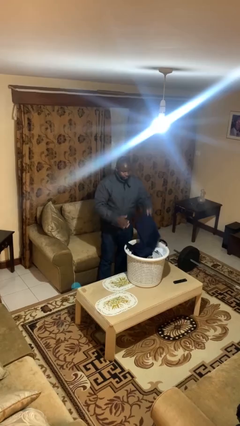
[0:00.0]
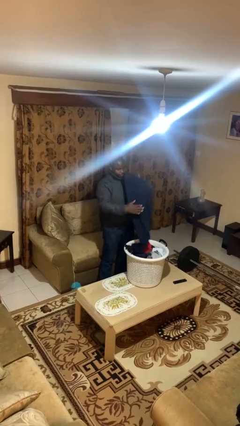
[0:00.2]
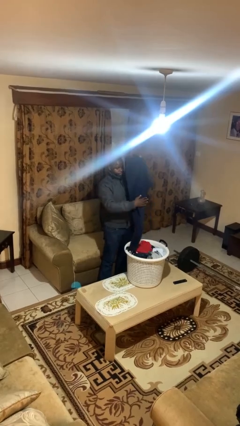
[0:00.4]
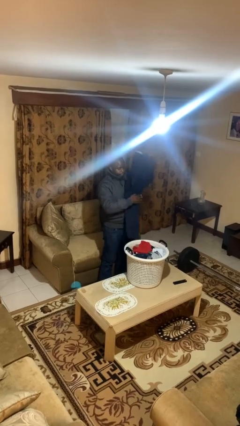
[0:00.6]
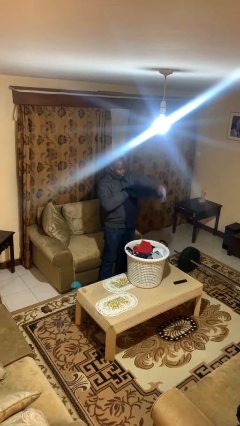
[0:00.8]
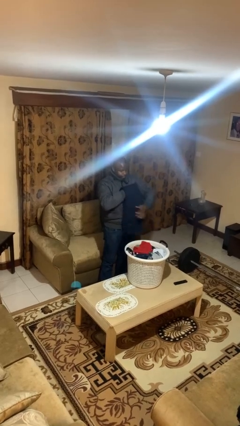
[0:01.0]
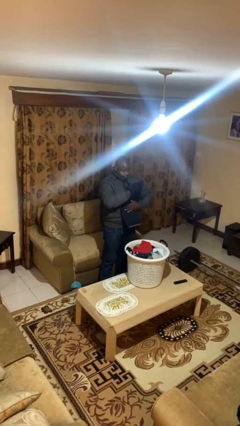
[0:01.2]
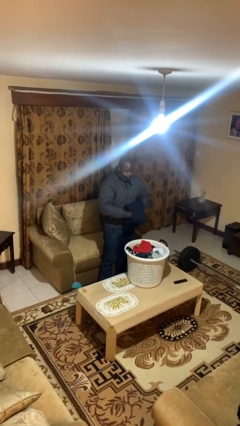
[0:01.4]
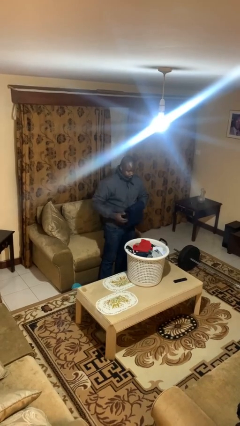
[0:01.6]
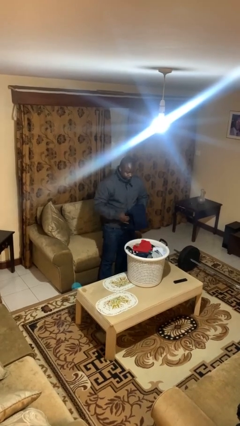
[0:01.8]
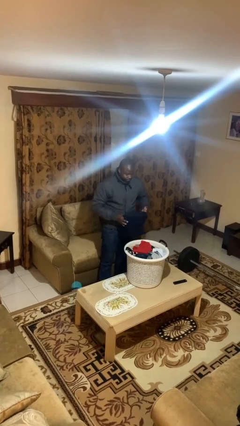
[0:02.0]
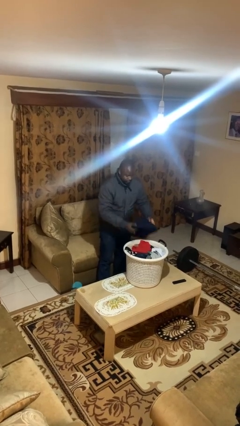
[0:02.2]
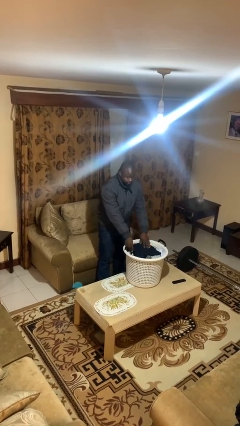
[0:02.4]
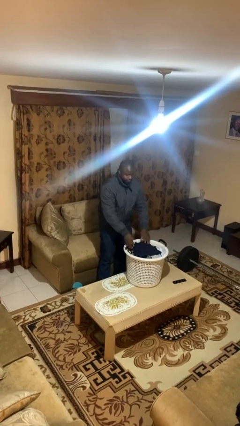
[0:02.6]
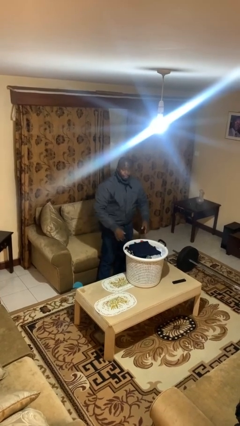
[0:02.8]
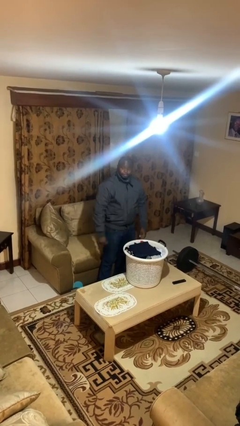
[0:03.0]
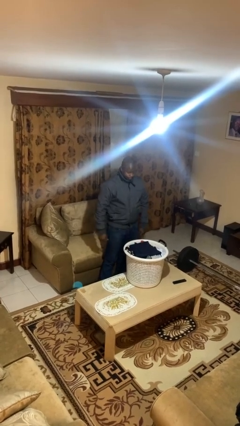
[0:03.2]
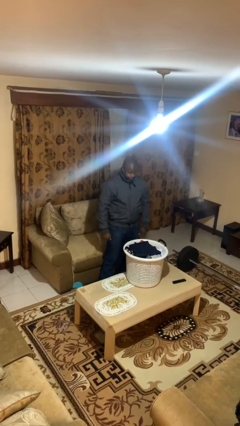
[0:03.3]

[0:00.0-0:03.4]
person folds pants

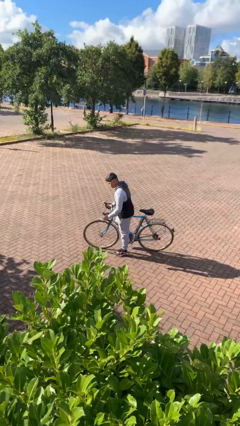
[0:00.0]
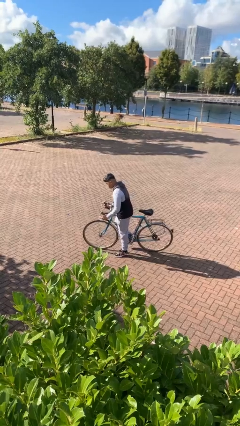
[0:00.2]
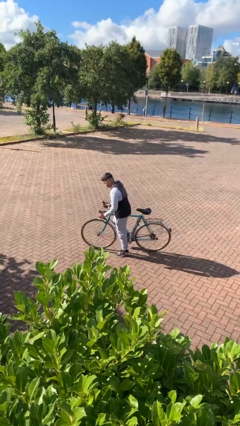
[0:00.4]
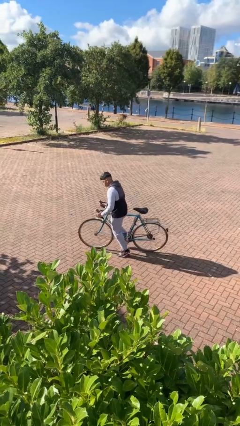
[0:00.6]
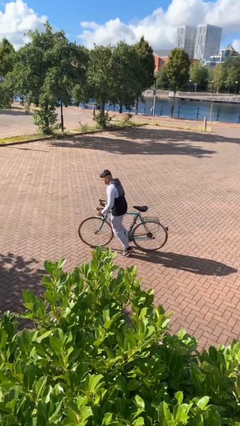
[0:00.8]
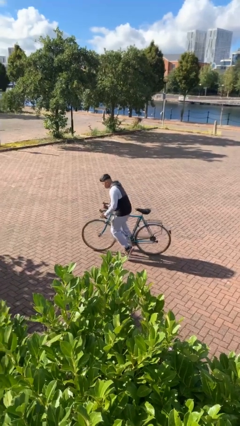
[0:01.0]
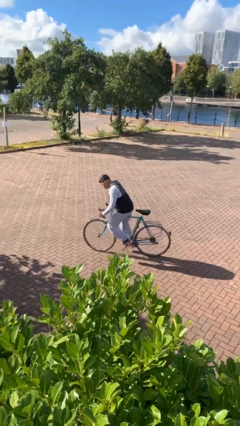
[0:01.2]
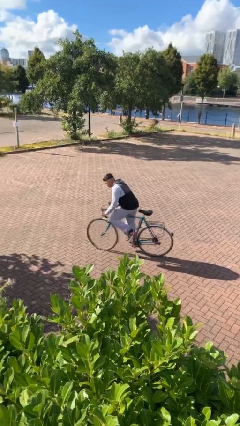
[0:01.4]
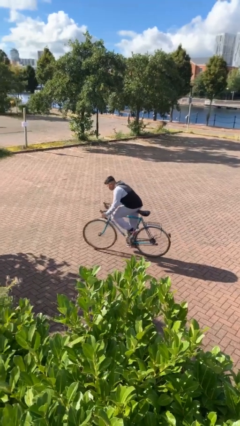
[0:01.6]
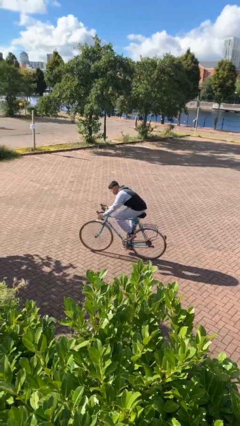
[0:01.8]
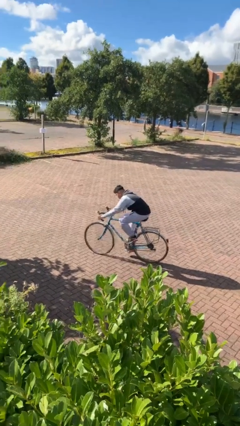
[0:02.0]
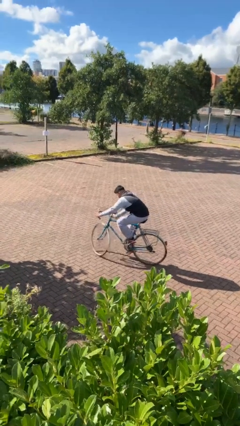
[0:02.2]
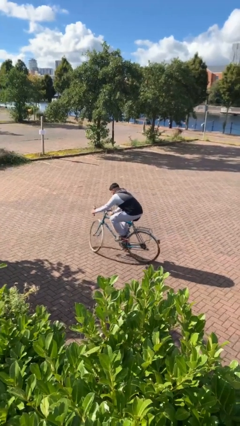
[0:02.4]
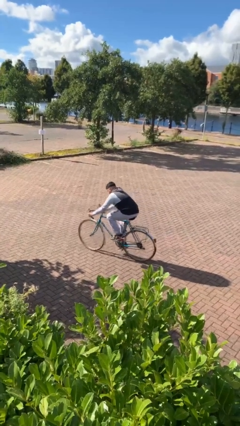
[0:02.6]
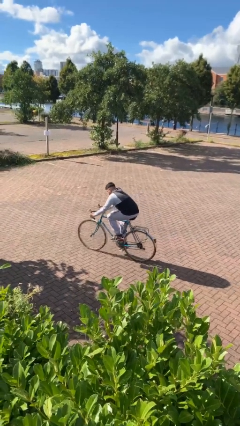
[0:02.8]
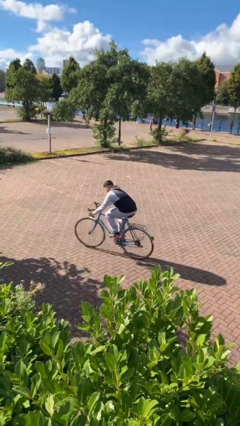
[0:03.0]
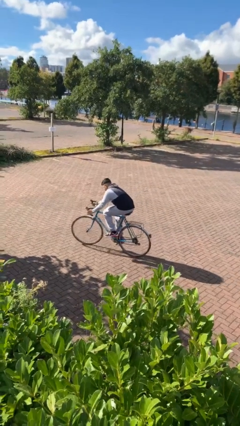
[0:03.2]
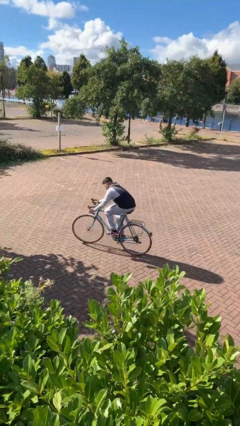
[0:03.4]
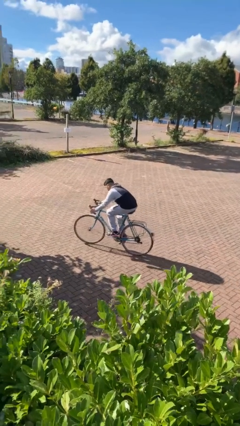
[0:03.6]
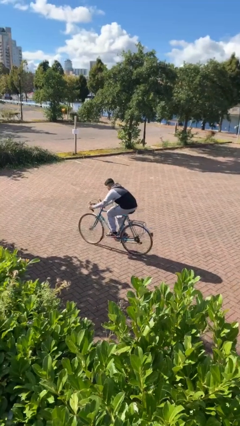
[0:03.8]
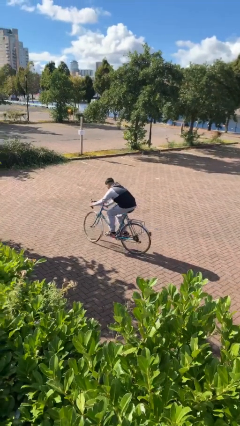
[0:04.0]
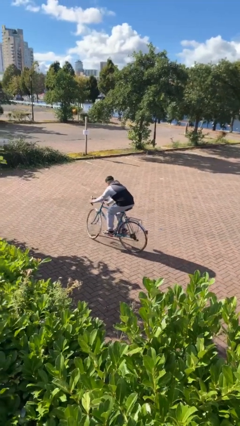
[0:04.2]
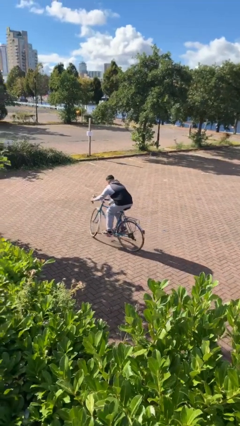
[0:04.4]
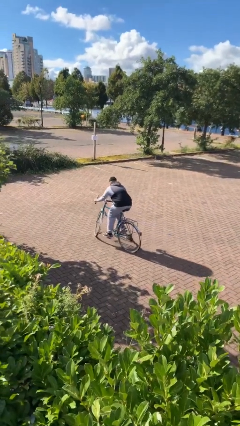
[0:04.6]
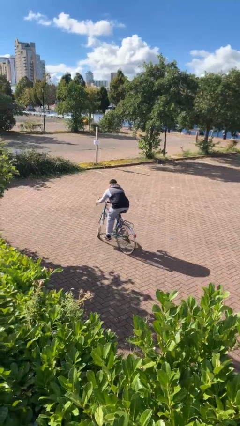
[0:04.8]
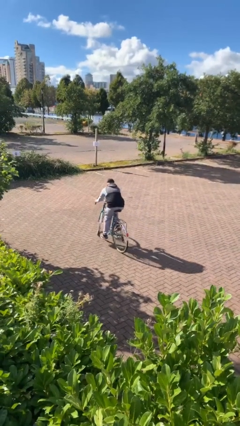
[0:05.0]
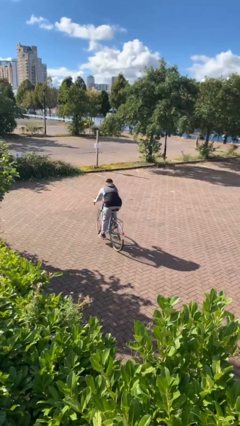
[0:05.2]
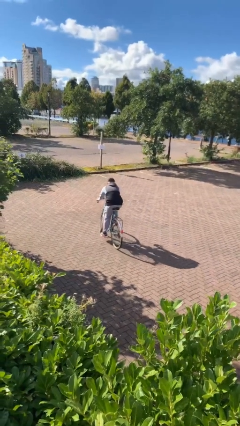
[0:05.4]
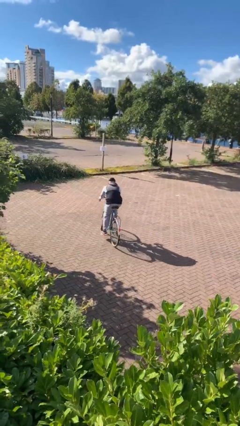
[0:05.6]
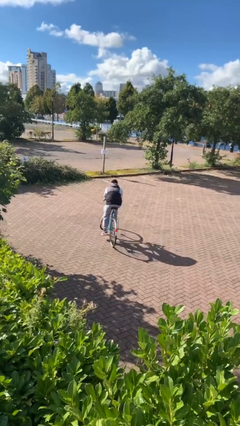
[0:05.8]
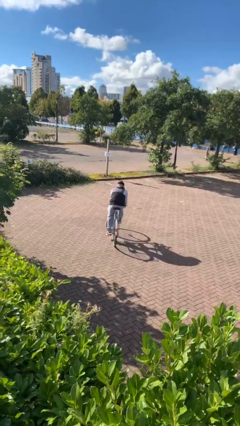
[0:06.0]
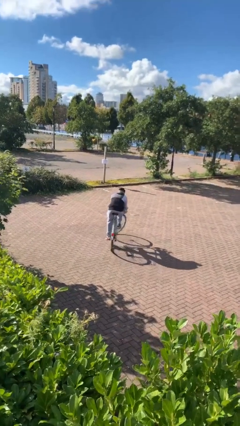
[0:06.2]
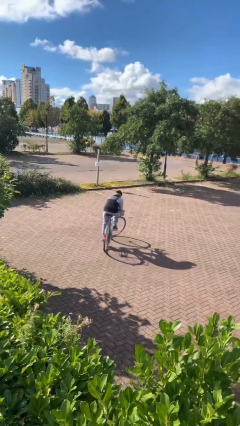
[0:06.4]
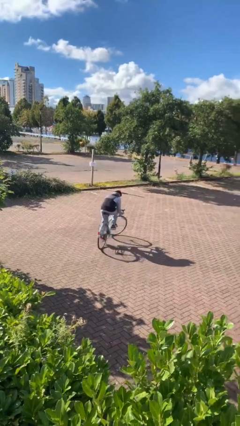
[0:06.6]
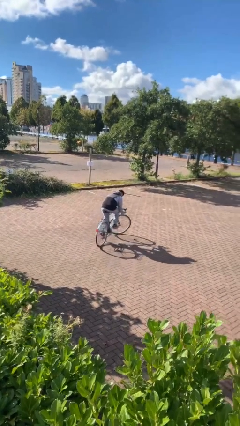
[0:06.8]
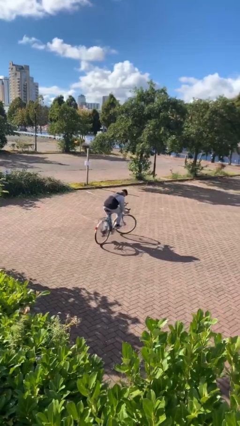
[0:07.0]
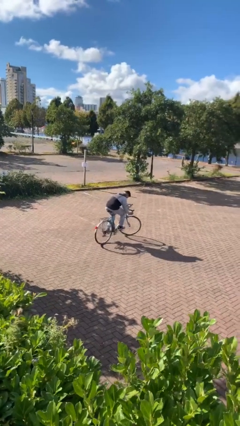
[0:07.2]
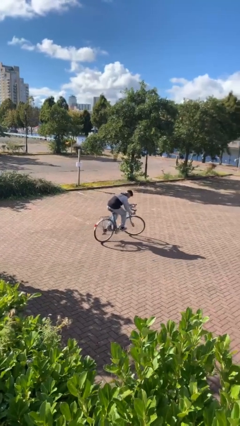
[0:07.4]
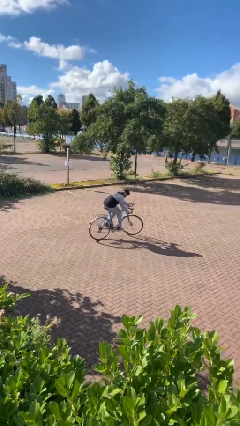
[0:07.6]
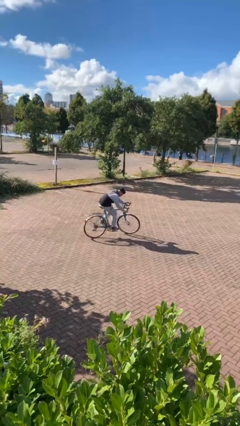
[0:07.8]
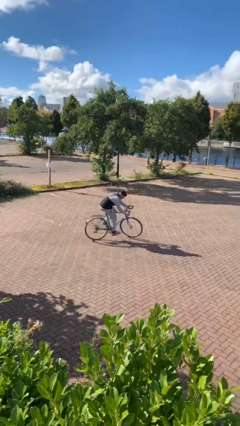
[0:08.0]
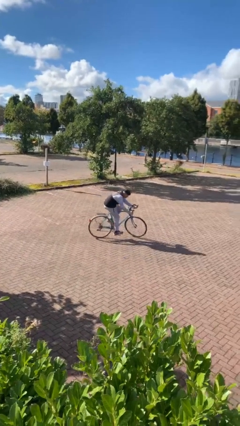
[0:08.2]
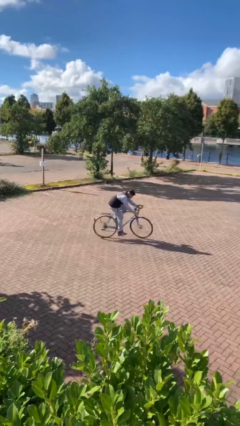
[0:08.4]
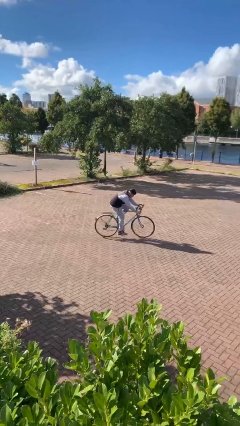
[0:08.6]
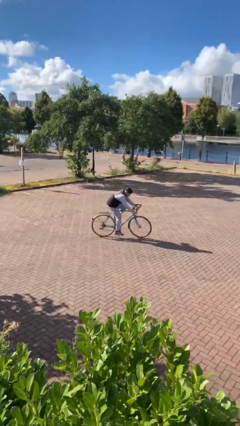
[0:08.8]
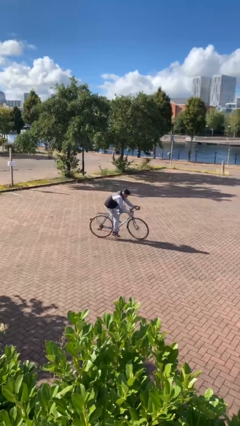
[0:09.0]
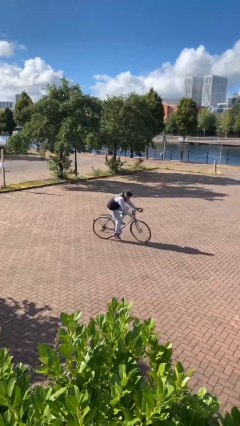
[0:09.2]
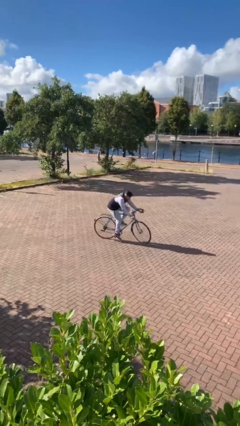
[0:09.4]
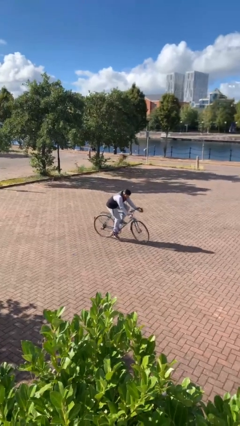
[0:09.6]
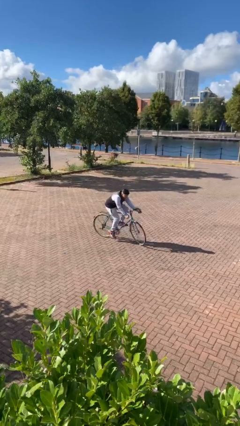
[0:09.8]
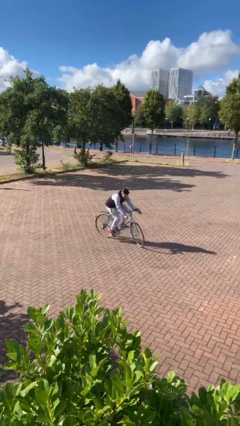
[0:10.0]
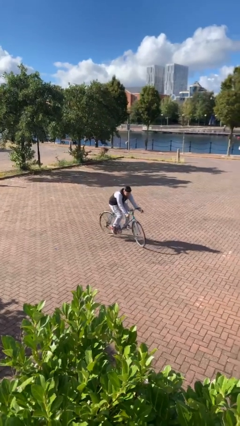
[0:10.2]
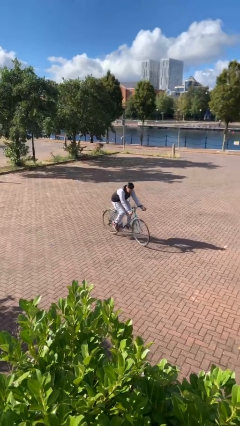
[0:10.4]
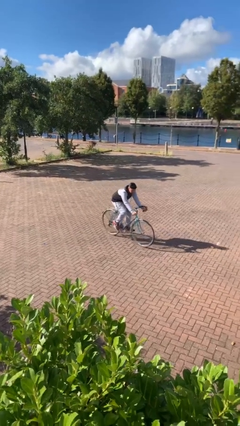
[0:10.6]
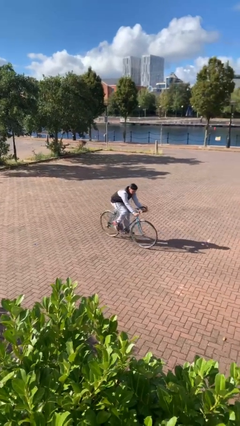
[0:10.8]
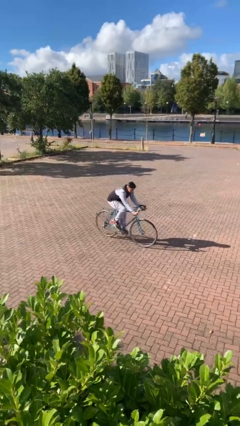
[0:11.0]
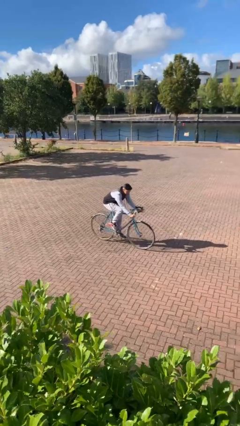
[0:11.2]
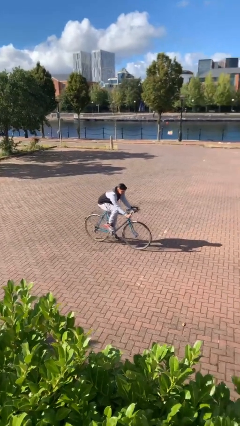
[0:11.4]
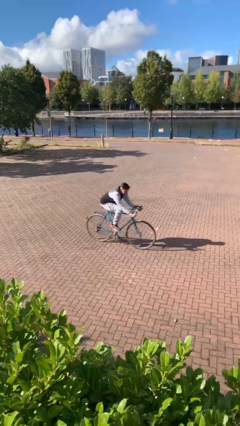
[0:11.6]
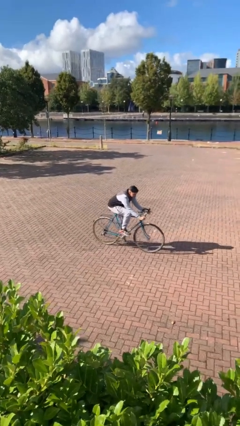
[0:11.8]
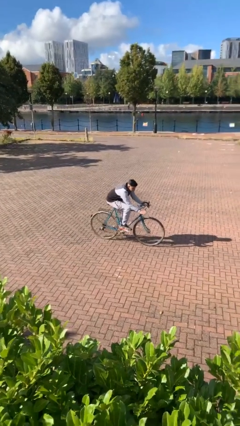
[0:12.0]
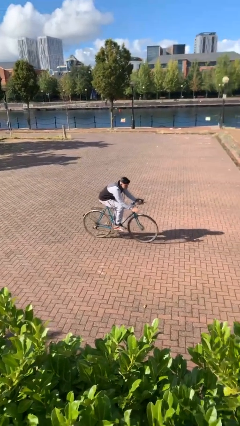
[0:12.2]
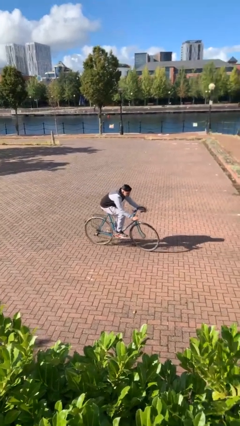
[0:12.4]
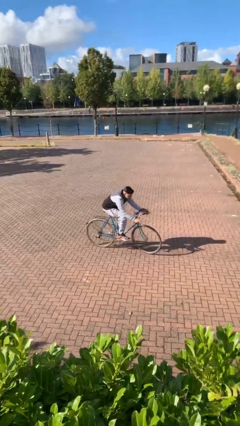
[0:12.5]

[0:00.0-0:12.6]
person rides bicycle

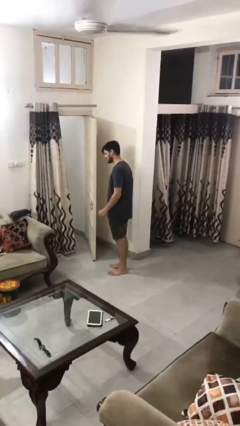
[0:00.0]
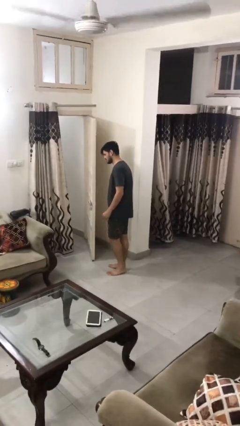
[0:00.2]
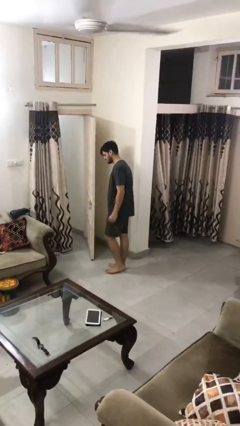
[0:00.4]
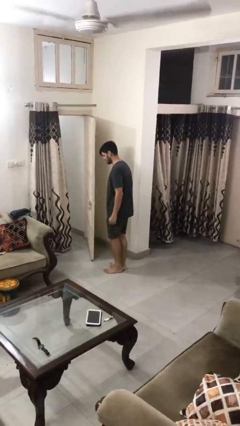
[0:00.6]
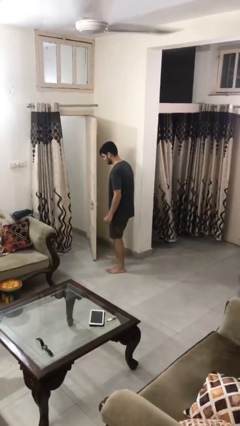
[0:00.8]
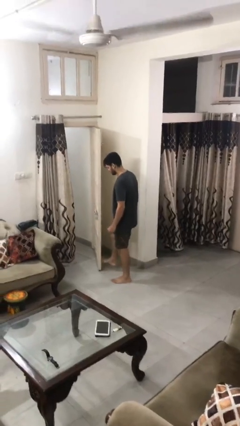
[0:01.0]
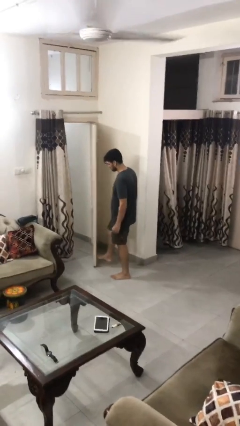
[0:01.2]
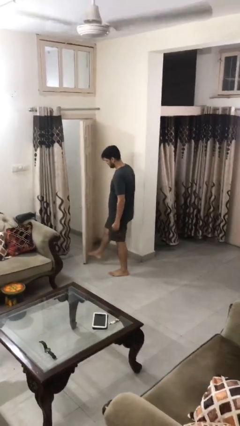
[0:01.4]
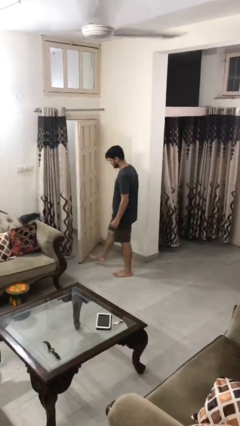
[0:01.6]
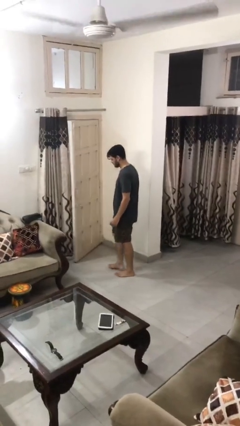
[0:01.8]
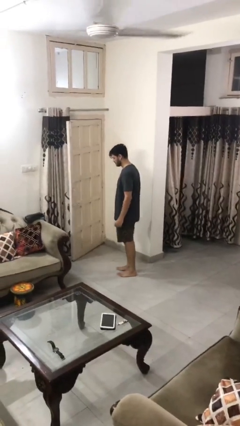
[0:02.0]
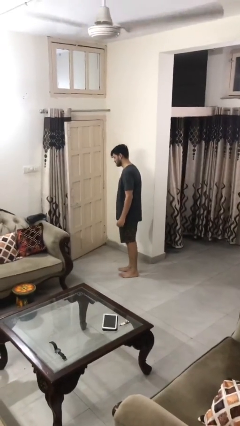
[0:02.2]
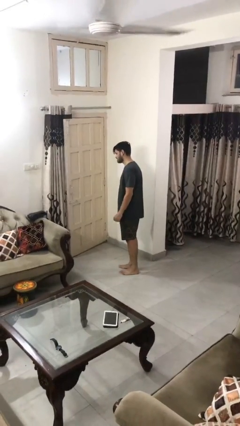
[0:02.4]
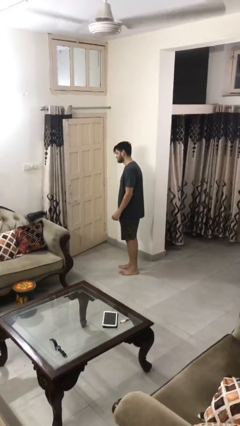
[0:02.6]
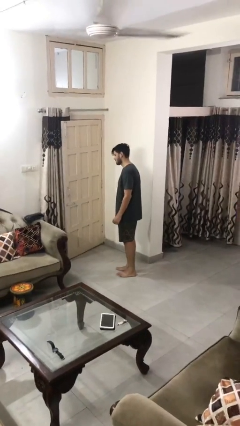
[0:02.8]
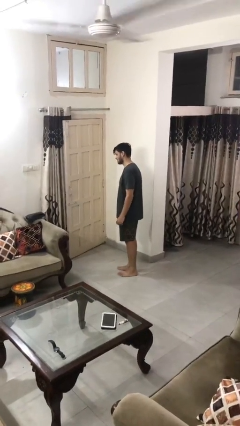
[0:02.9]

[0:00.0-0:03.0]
person closes door with foot
